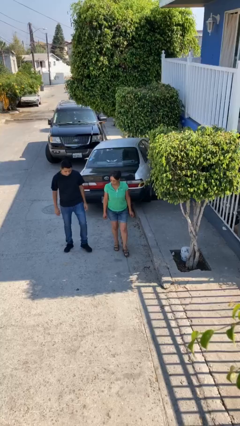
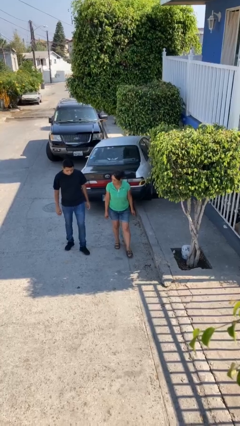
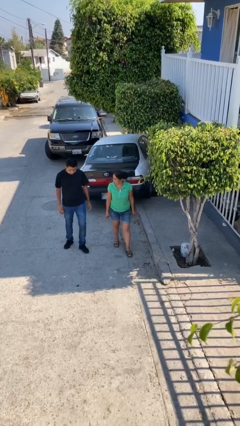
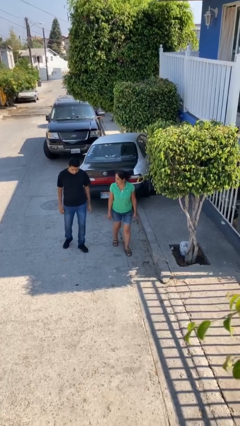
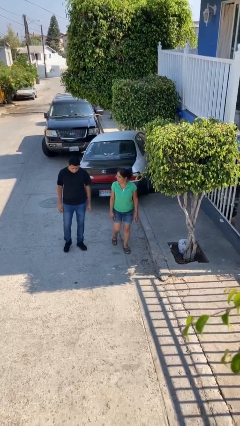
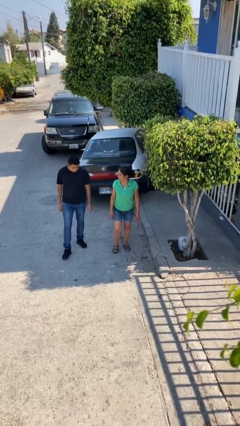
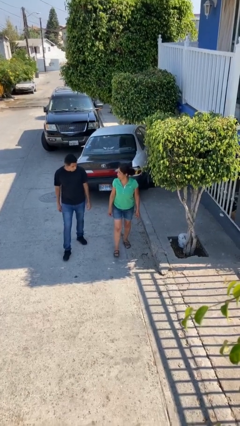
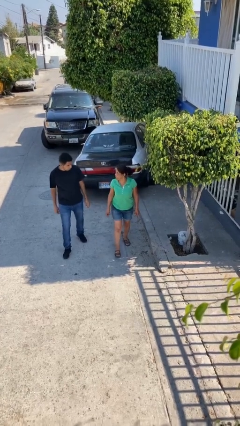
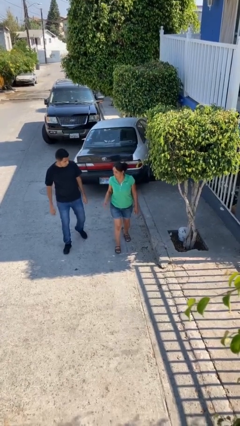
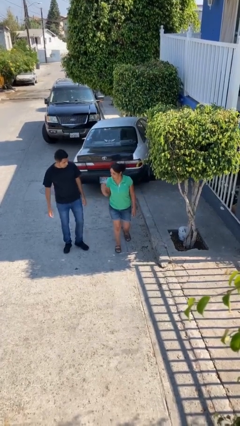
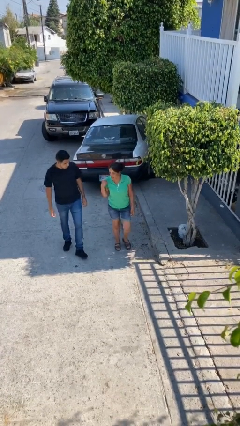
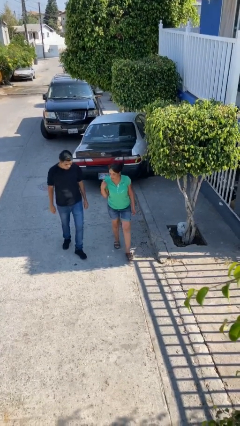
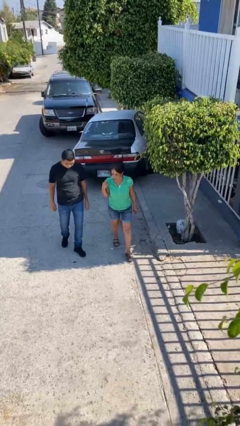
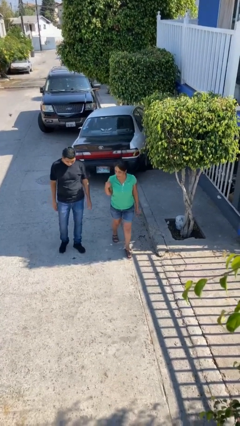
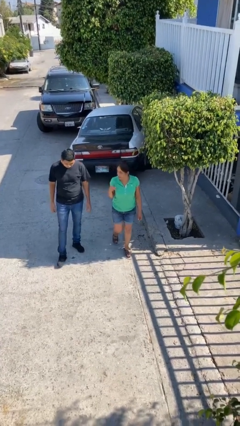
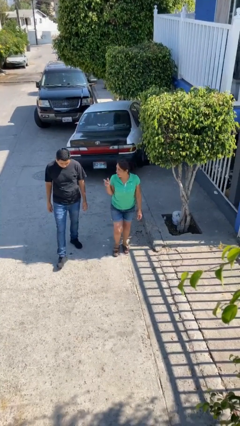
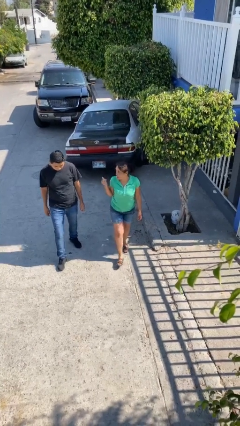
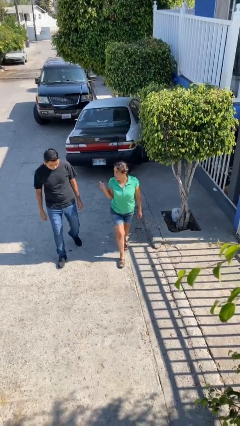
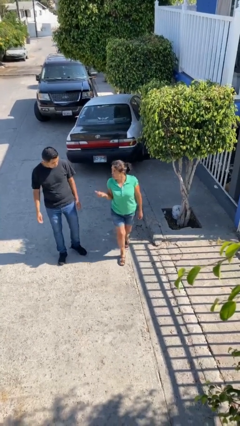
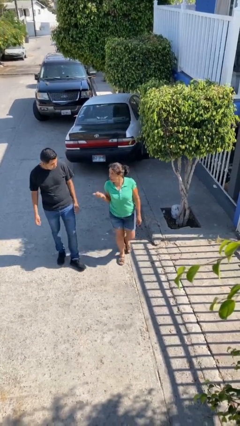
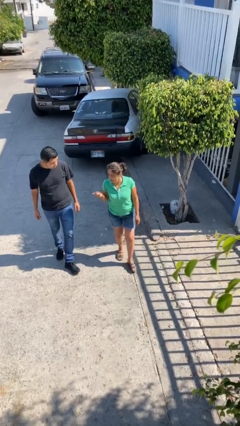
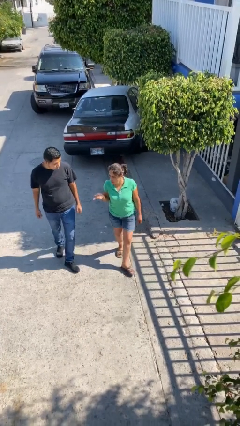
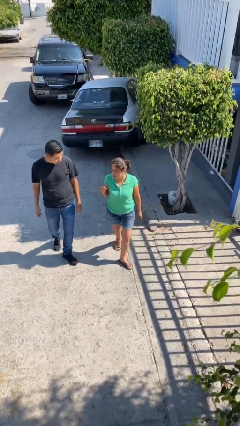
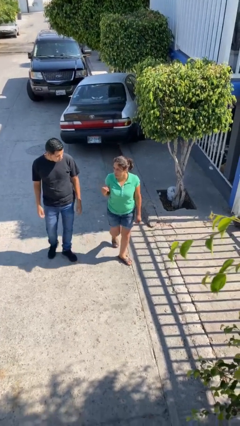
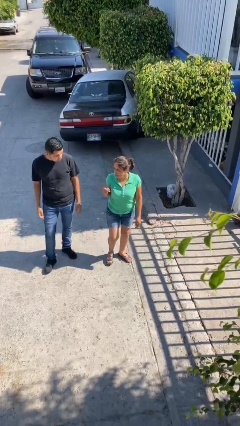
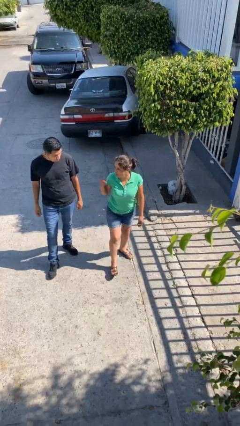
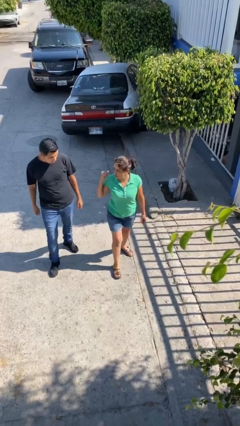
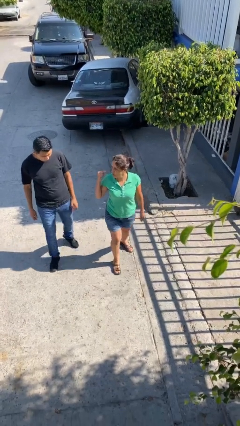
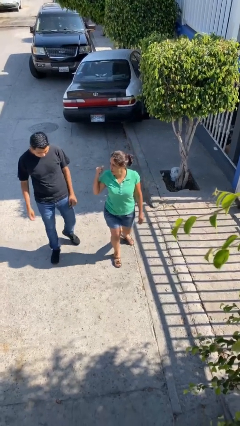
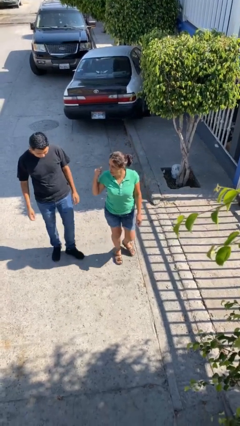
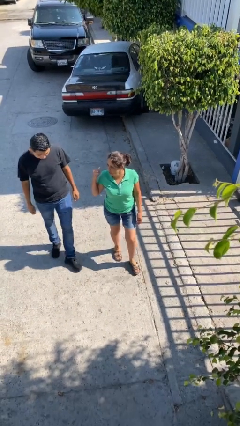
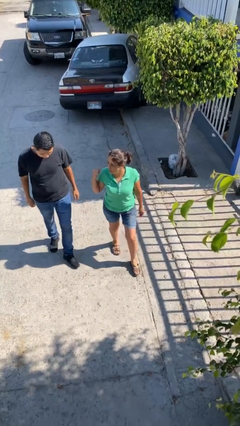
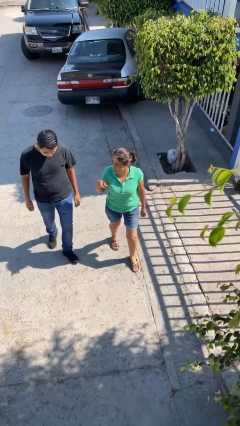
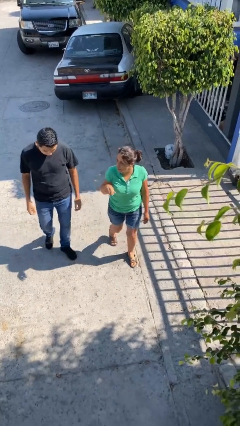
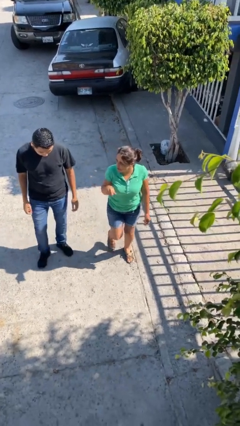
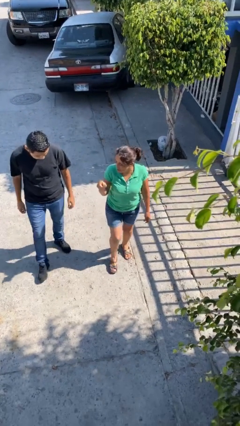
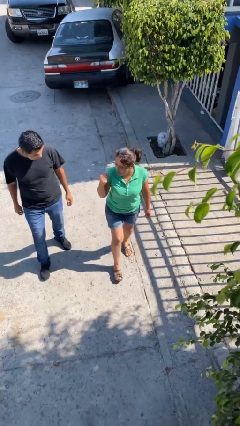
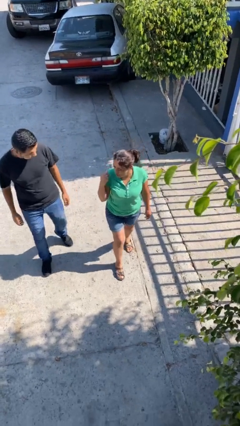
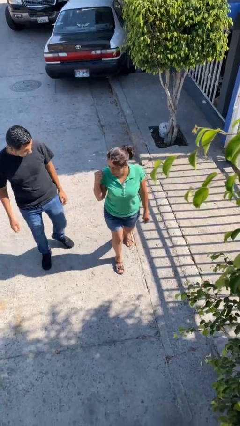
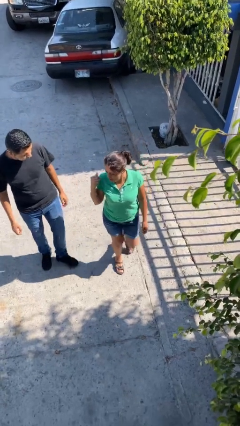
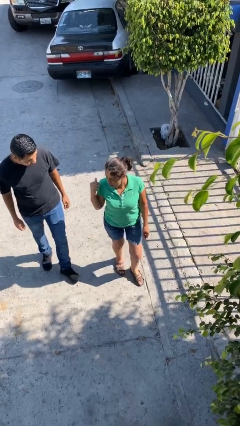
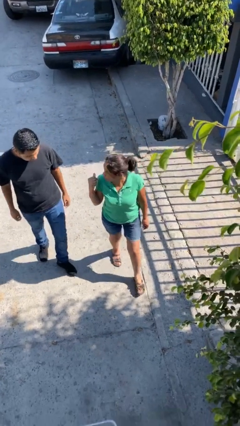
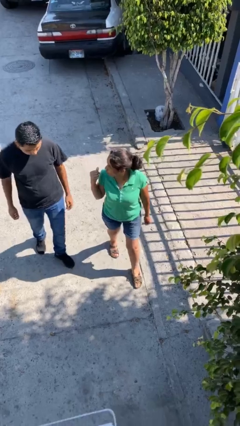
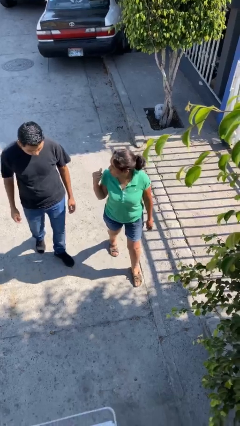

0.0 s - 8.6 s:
person talks to person

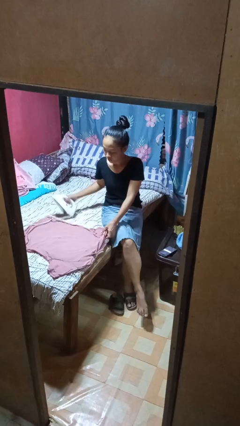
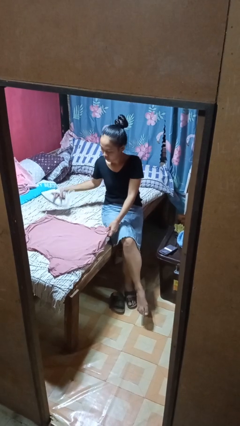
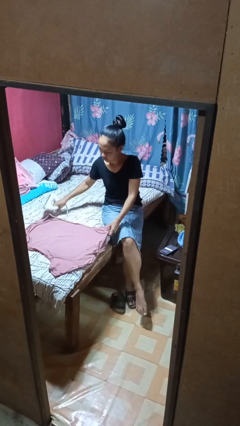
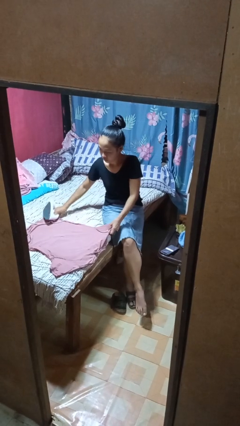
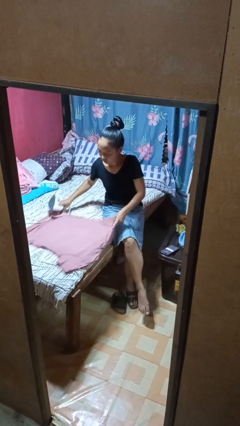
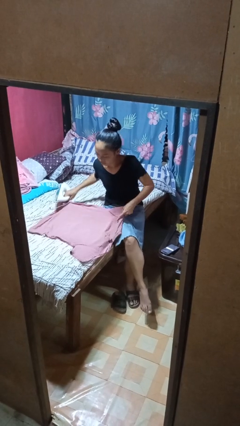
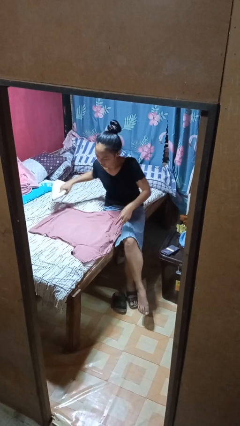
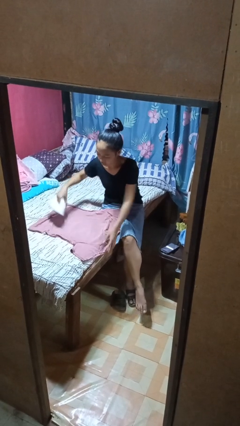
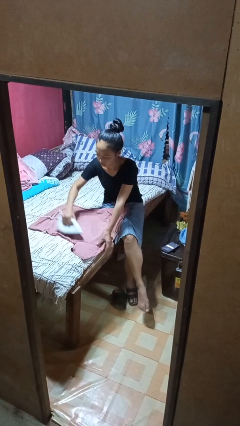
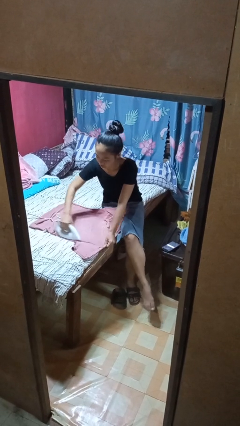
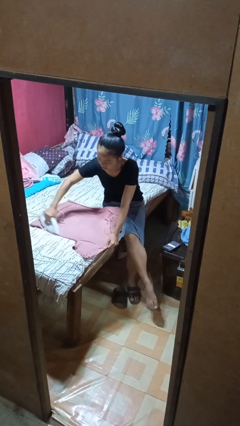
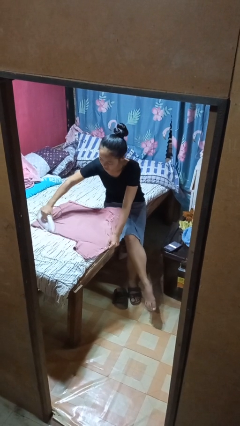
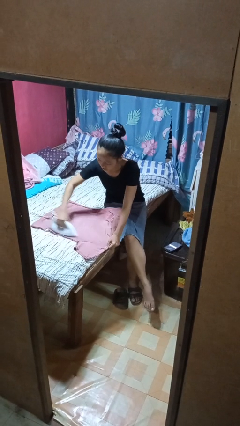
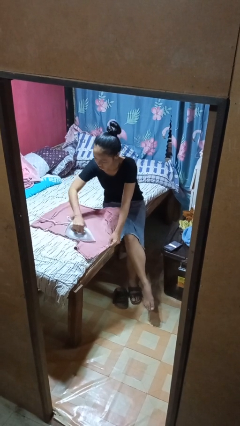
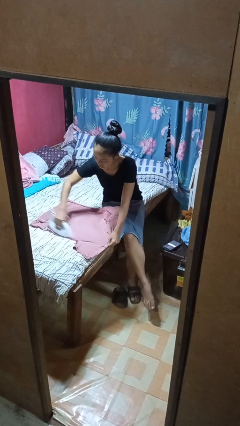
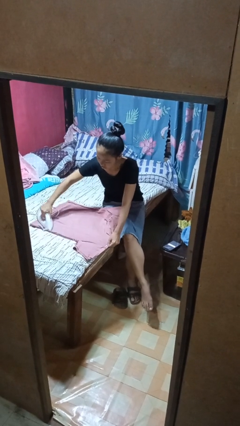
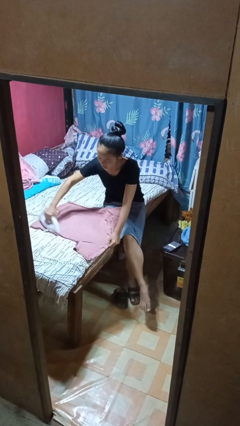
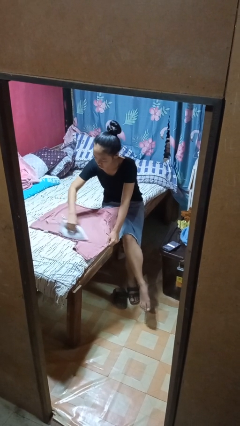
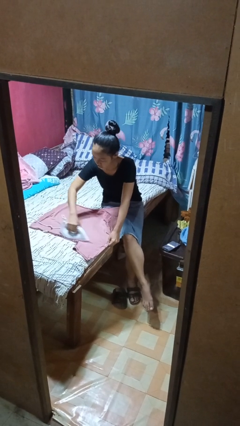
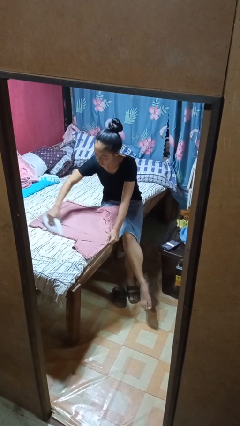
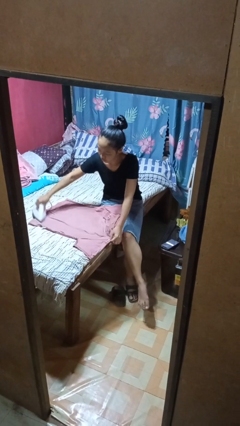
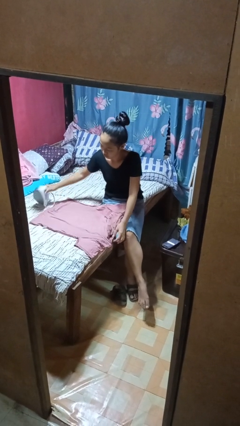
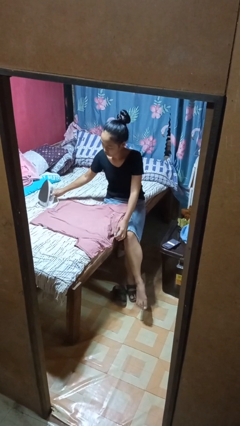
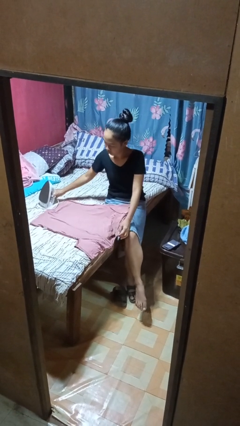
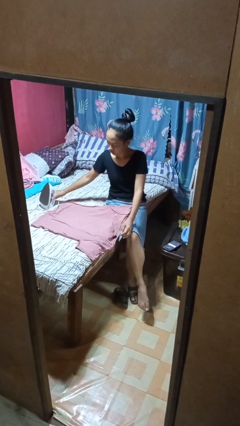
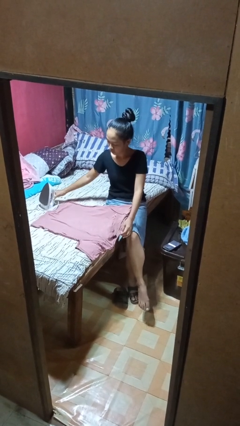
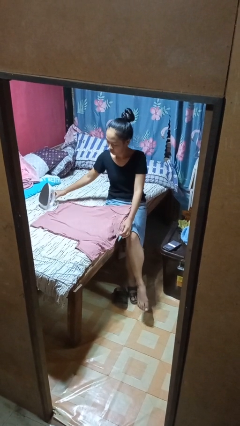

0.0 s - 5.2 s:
person irons clothes

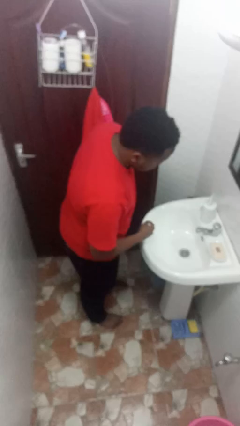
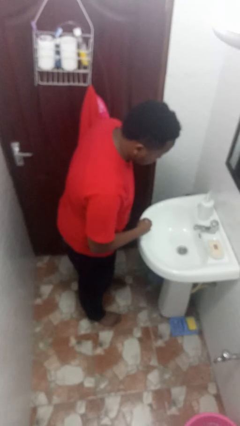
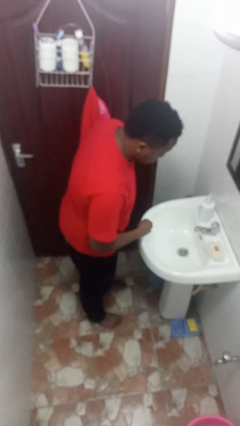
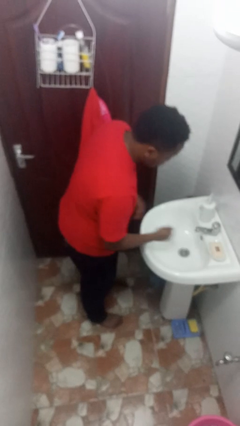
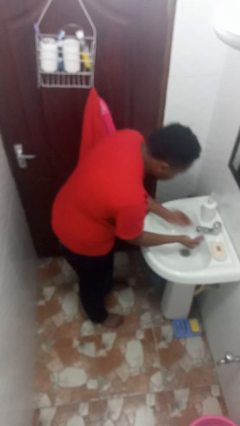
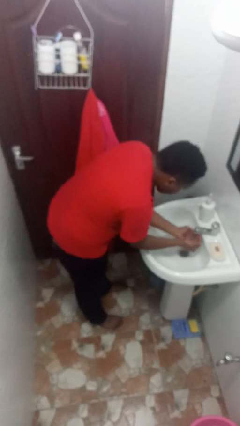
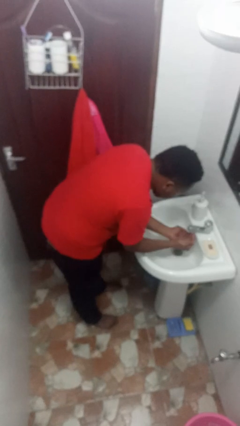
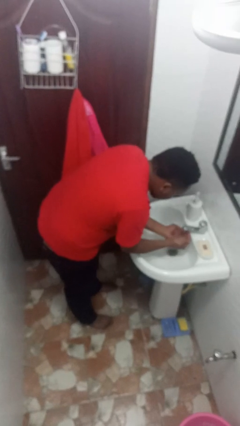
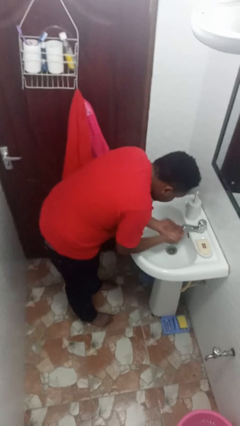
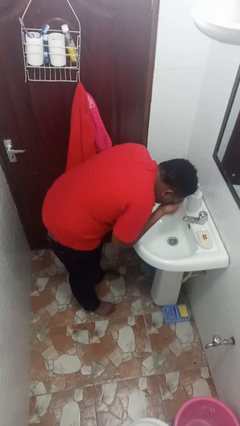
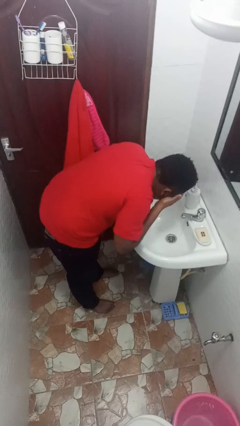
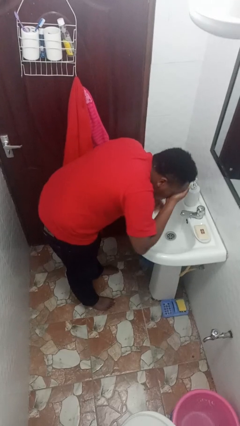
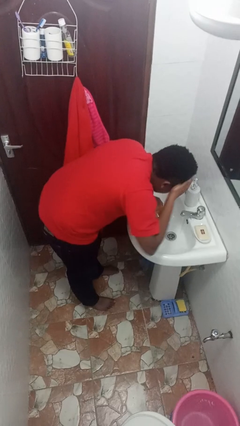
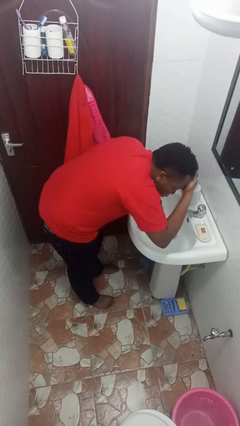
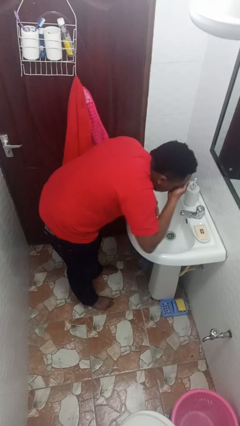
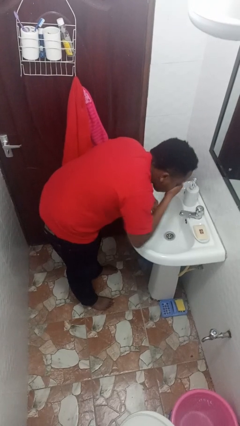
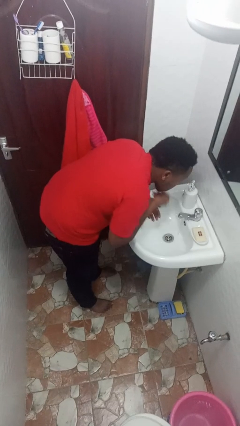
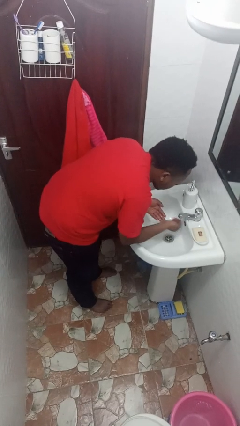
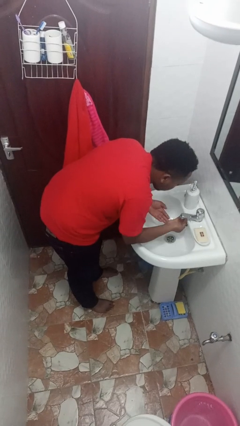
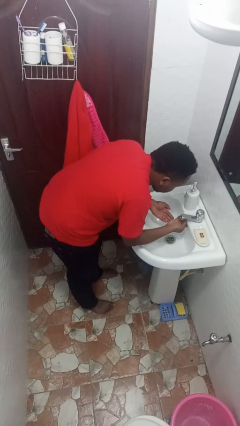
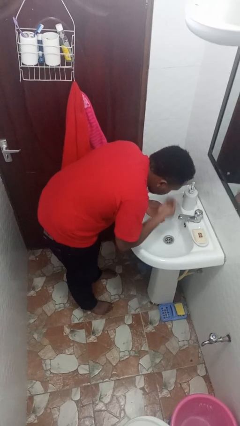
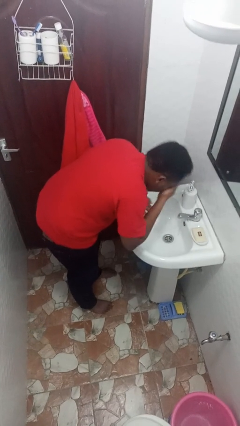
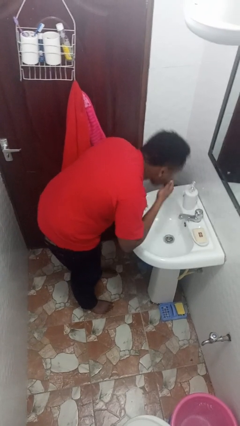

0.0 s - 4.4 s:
person washes face
